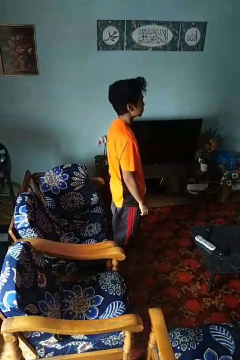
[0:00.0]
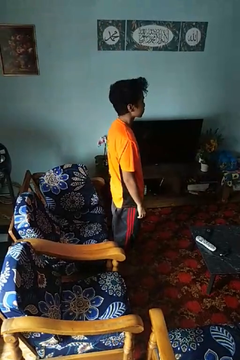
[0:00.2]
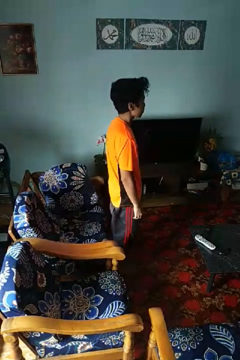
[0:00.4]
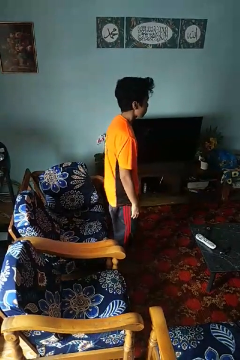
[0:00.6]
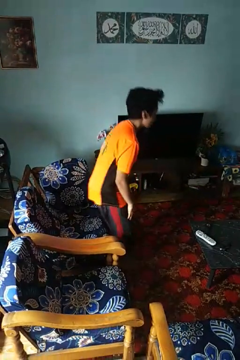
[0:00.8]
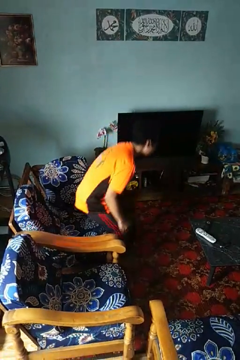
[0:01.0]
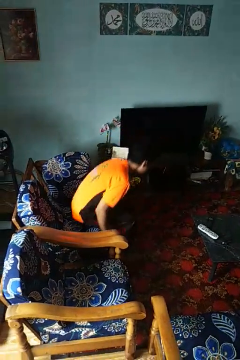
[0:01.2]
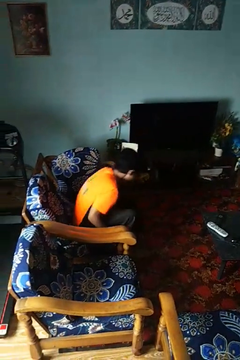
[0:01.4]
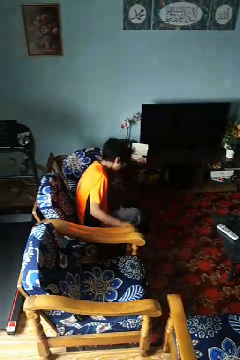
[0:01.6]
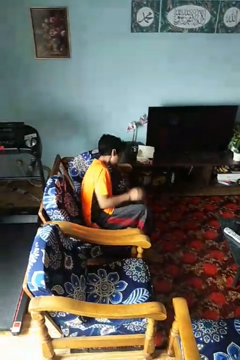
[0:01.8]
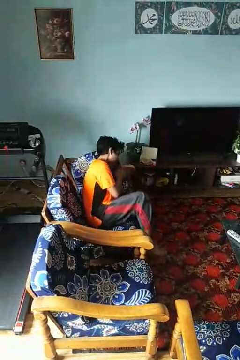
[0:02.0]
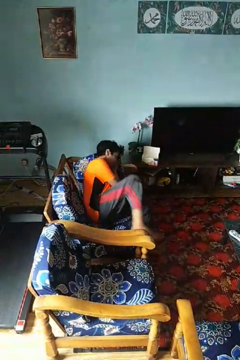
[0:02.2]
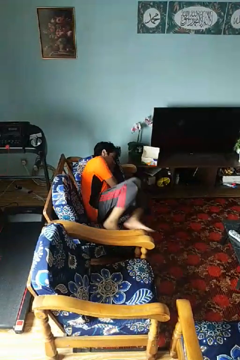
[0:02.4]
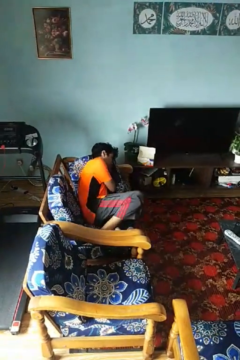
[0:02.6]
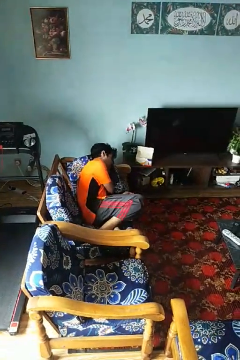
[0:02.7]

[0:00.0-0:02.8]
person lies down on couch

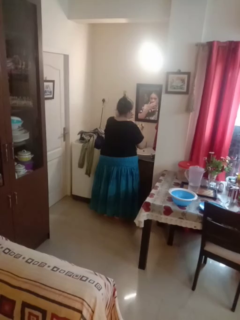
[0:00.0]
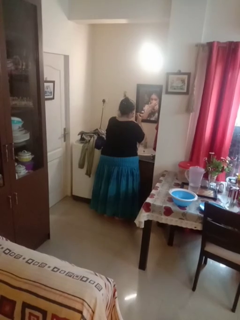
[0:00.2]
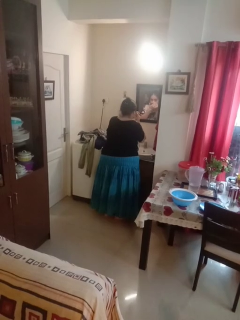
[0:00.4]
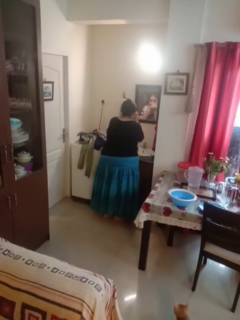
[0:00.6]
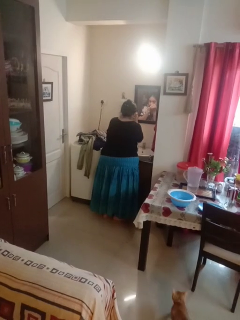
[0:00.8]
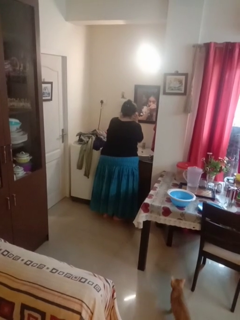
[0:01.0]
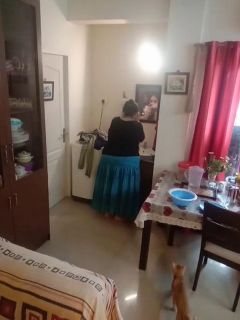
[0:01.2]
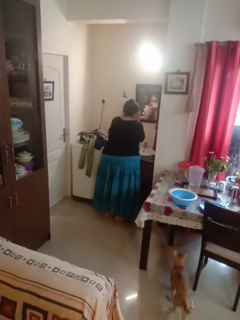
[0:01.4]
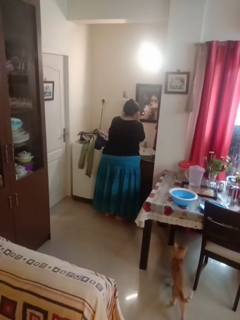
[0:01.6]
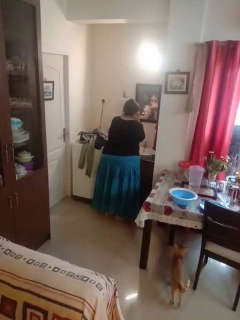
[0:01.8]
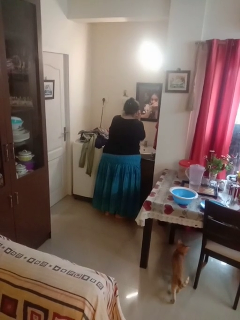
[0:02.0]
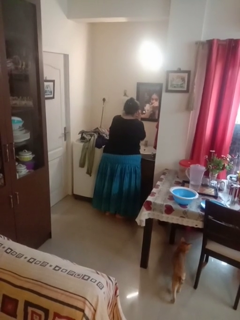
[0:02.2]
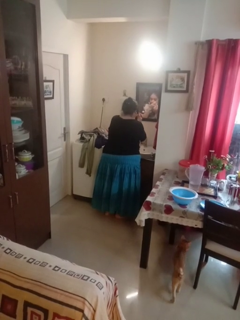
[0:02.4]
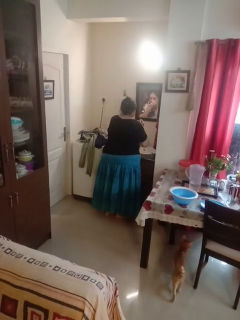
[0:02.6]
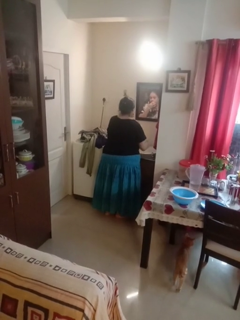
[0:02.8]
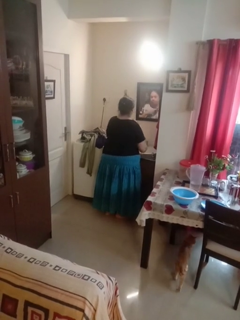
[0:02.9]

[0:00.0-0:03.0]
person applies eye makeup

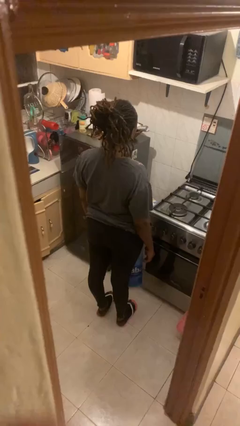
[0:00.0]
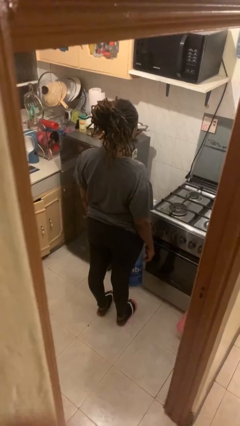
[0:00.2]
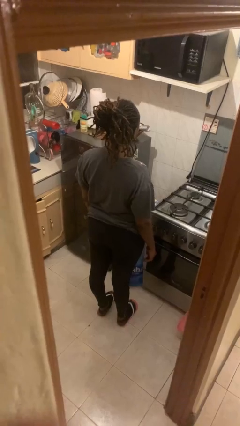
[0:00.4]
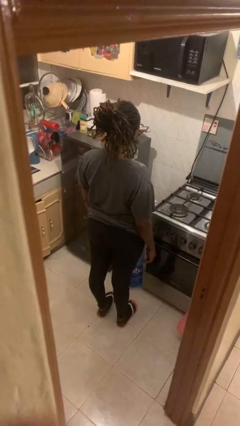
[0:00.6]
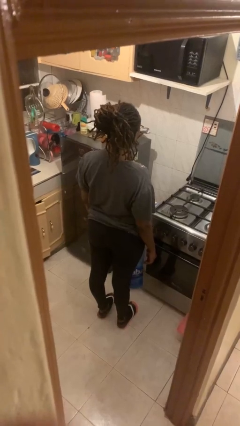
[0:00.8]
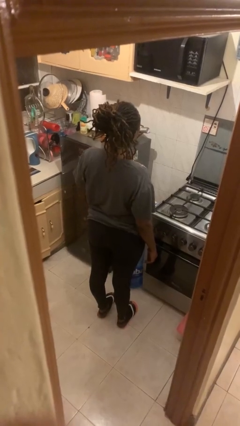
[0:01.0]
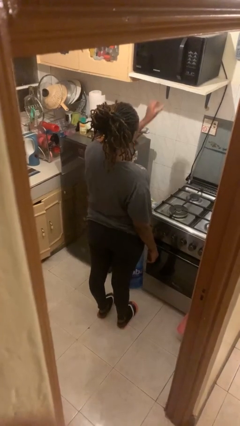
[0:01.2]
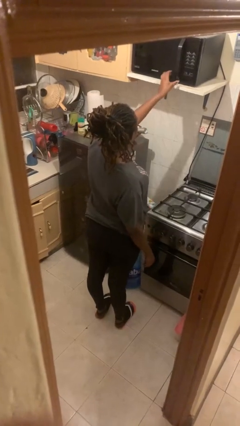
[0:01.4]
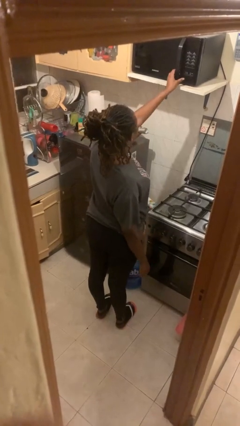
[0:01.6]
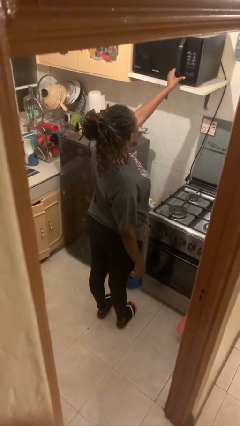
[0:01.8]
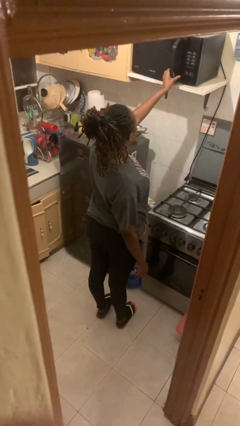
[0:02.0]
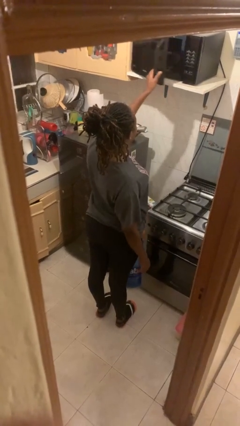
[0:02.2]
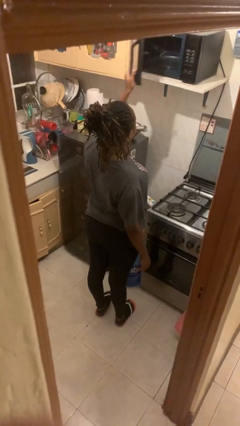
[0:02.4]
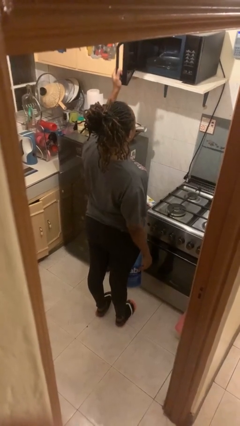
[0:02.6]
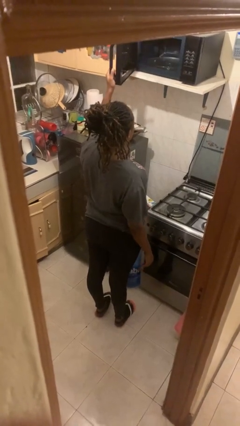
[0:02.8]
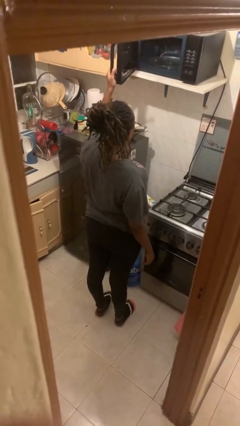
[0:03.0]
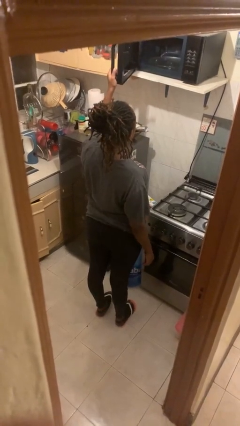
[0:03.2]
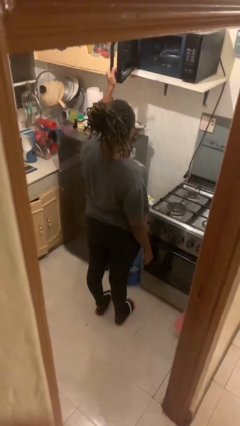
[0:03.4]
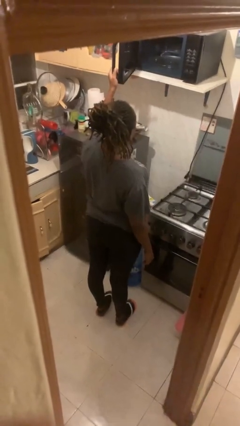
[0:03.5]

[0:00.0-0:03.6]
person opens microwave

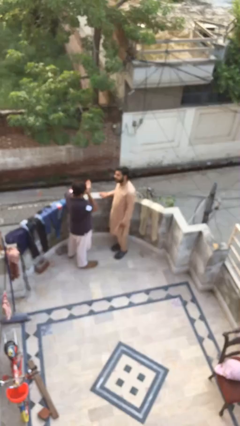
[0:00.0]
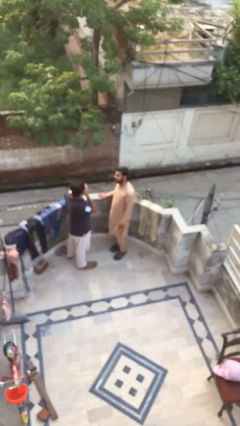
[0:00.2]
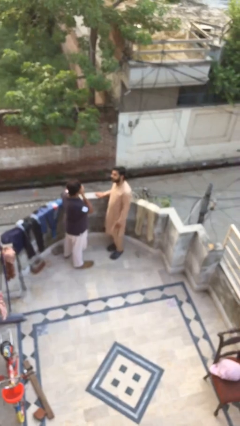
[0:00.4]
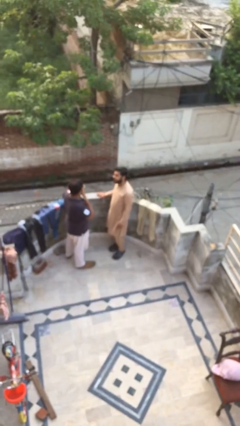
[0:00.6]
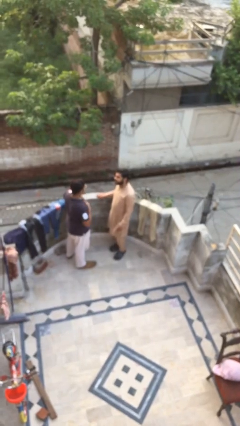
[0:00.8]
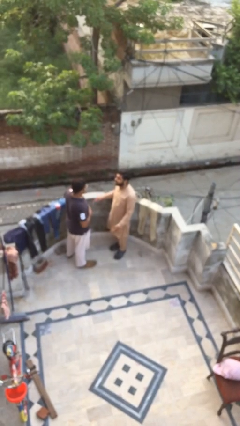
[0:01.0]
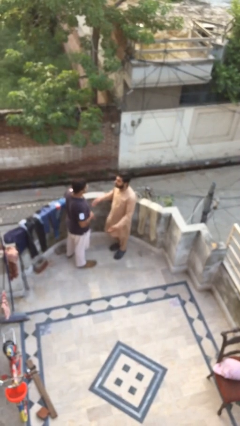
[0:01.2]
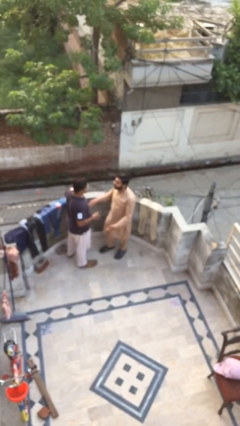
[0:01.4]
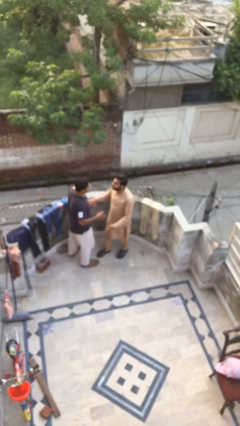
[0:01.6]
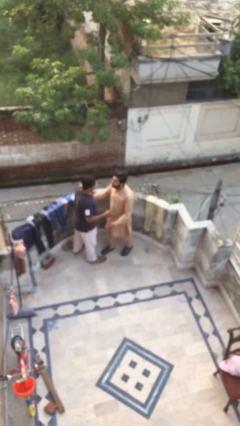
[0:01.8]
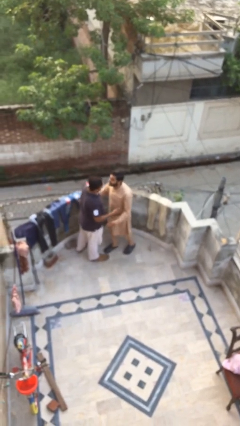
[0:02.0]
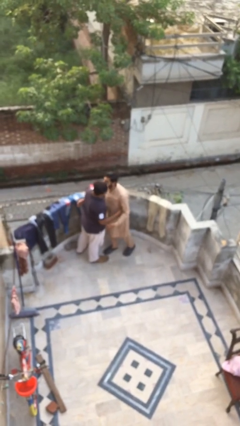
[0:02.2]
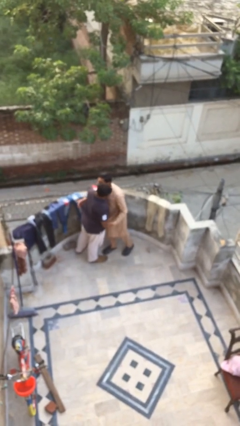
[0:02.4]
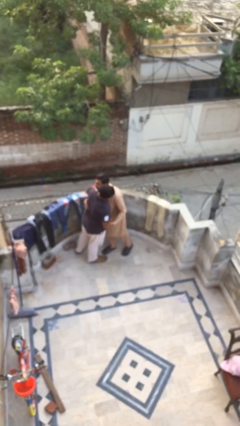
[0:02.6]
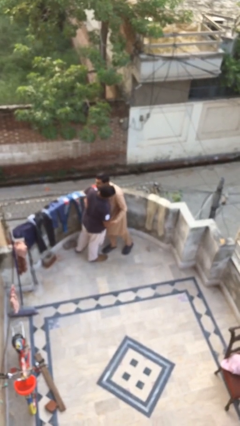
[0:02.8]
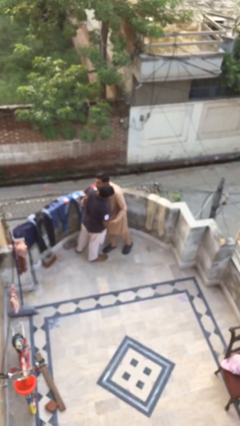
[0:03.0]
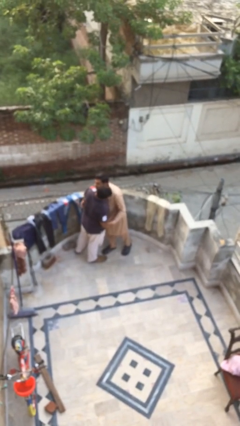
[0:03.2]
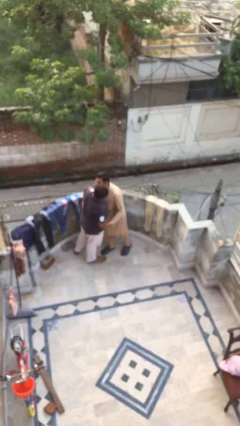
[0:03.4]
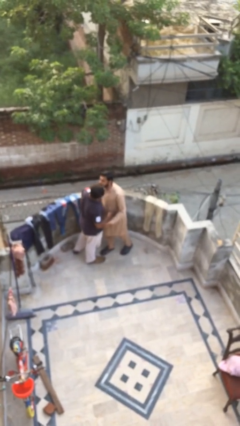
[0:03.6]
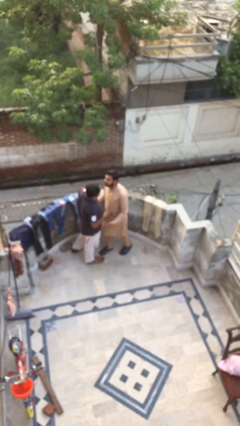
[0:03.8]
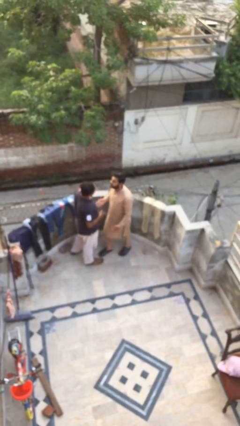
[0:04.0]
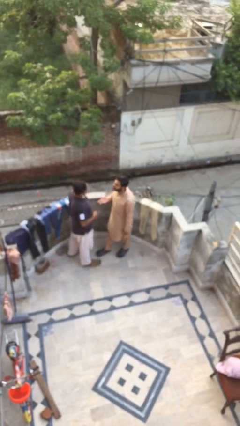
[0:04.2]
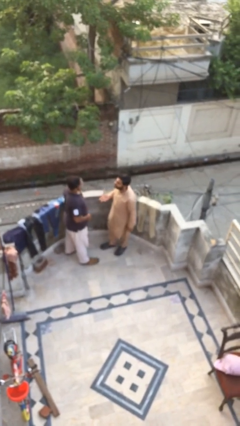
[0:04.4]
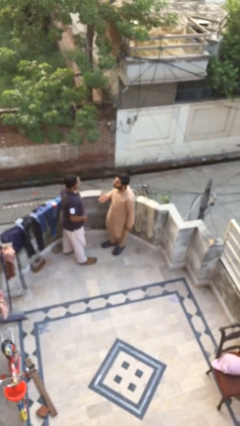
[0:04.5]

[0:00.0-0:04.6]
person embraces person

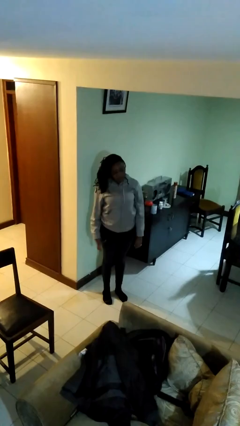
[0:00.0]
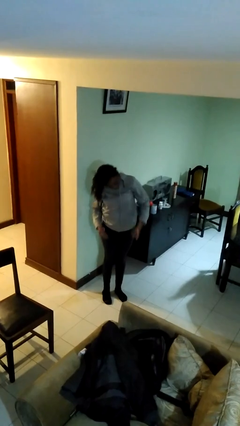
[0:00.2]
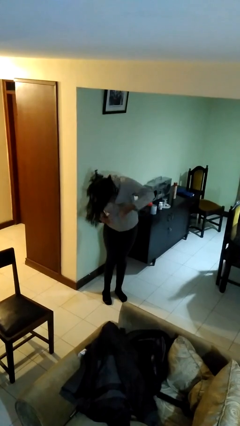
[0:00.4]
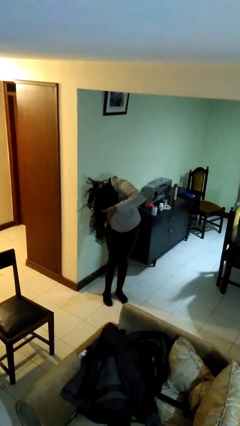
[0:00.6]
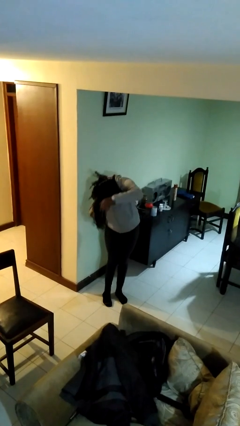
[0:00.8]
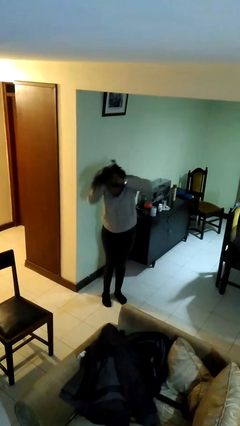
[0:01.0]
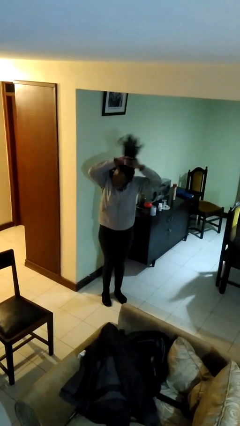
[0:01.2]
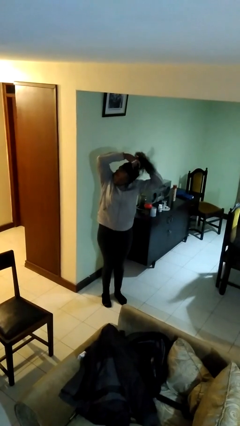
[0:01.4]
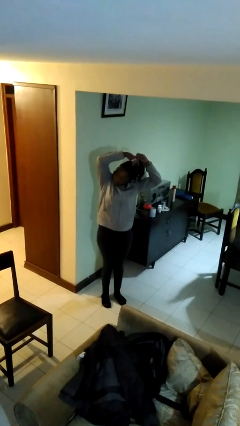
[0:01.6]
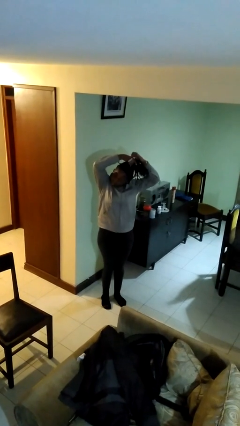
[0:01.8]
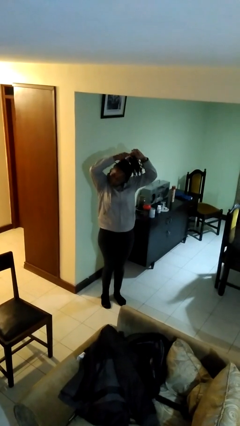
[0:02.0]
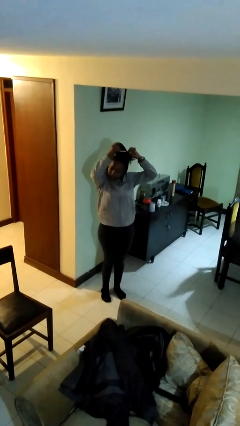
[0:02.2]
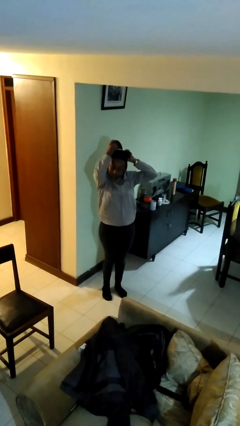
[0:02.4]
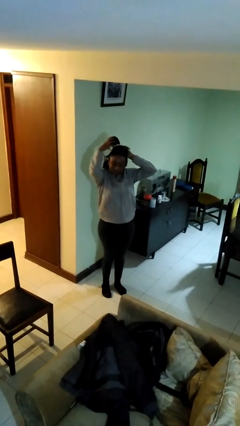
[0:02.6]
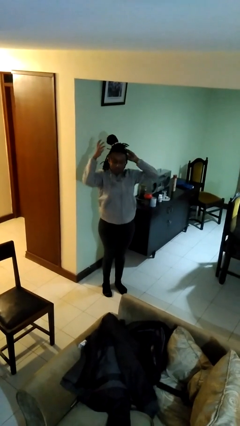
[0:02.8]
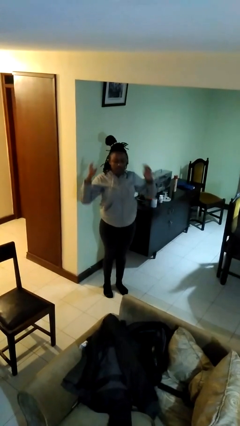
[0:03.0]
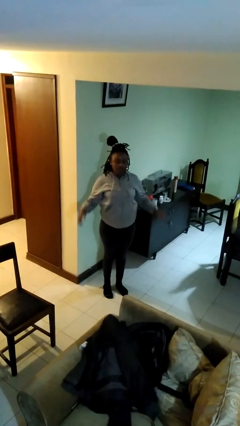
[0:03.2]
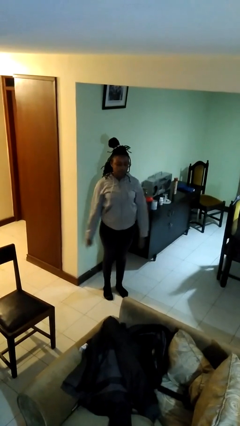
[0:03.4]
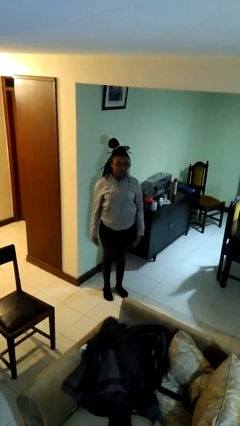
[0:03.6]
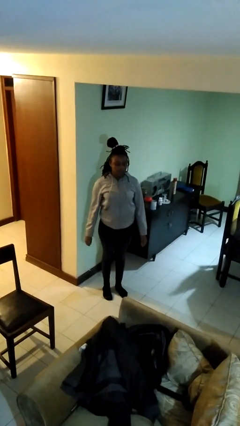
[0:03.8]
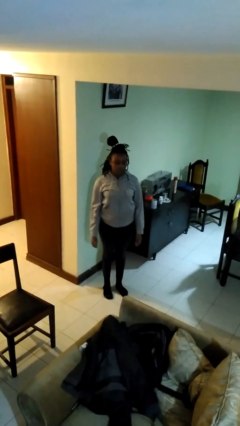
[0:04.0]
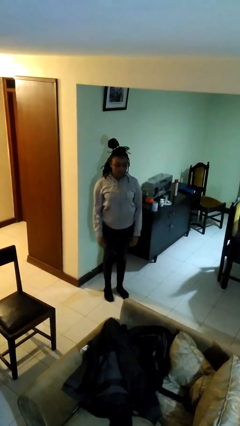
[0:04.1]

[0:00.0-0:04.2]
person puts hair in ponytail
